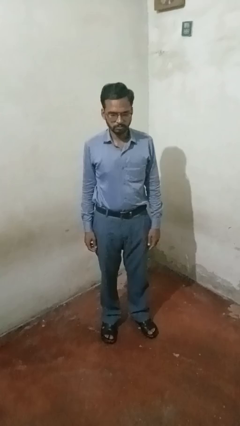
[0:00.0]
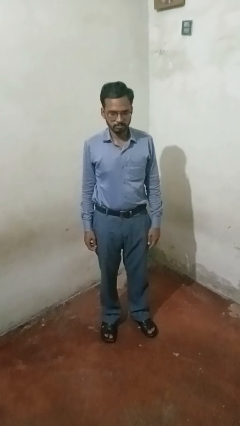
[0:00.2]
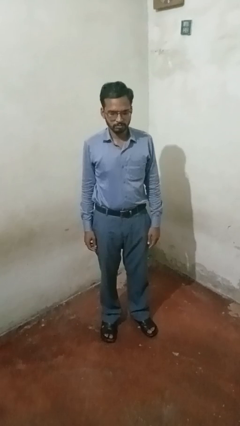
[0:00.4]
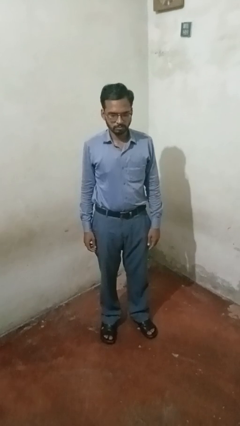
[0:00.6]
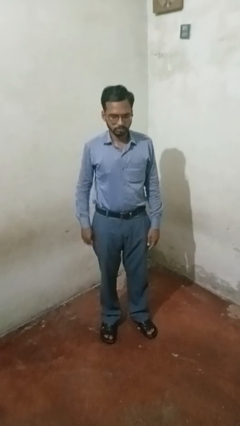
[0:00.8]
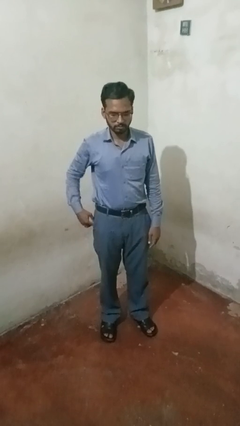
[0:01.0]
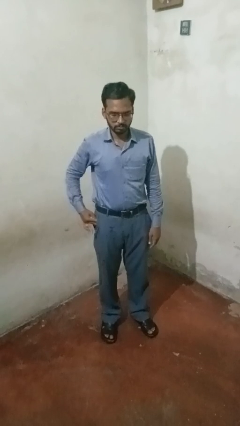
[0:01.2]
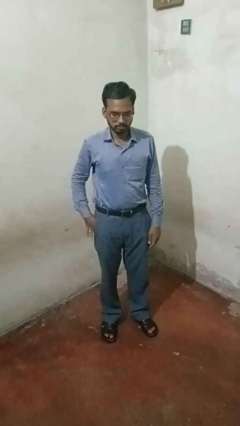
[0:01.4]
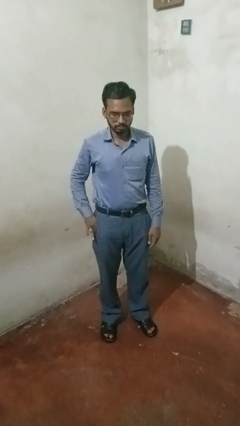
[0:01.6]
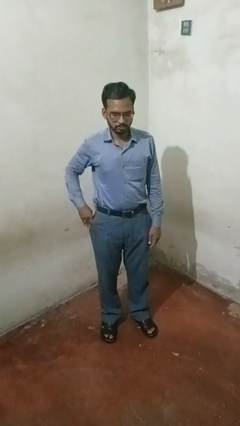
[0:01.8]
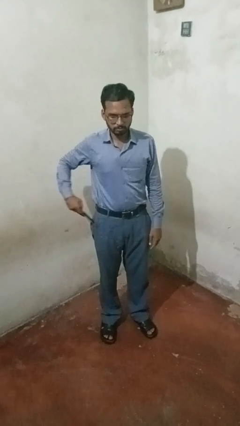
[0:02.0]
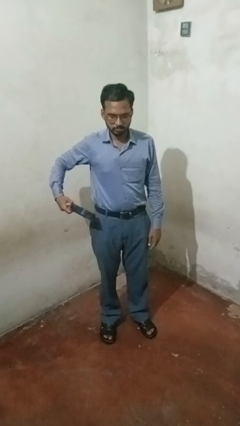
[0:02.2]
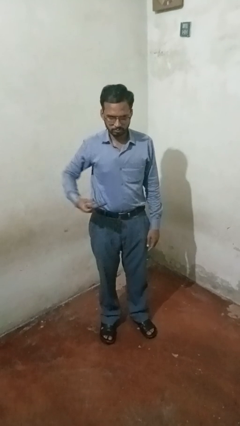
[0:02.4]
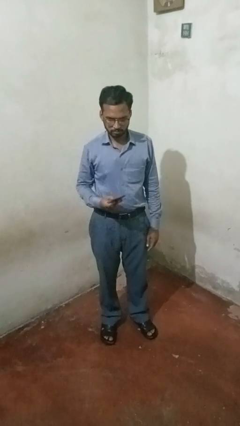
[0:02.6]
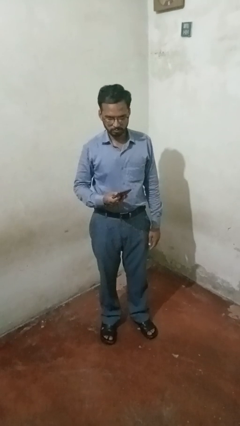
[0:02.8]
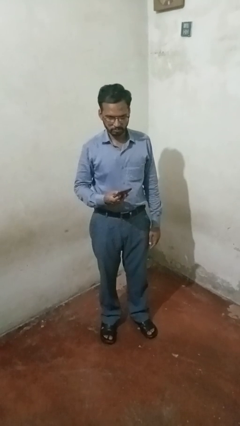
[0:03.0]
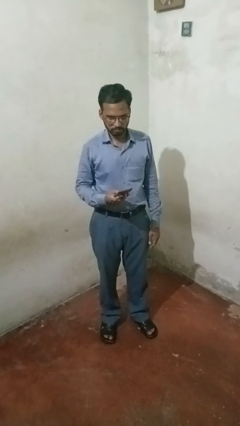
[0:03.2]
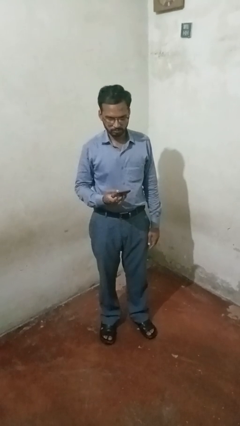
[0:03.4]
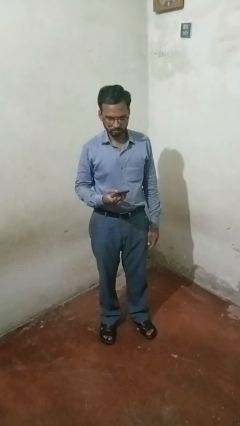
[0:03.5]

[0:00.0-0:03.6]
person takes phone from pocket

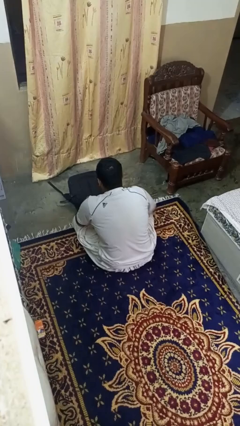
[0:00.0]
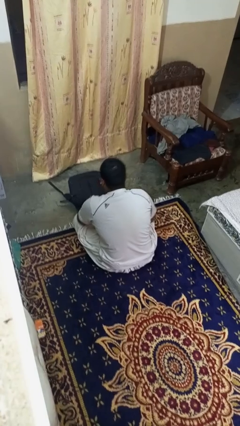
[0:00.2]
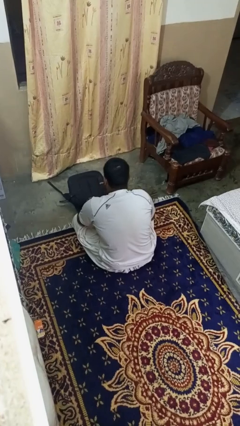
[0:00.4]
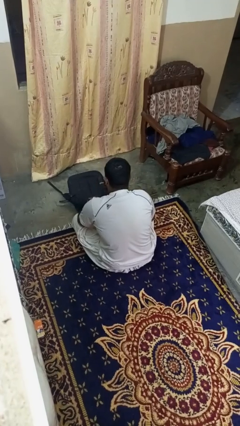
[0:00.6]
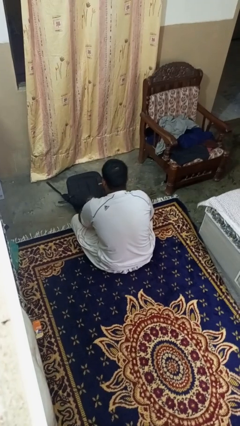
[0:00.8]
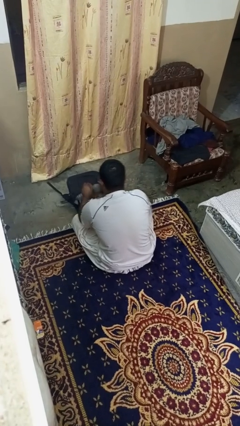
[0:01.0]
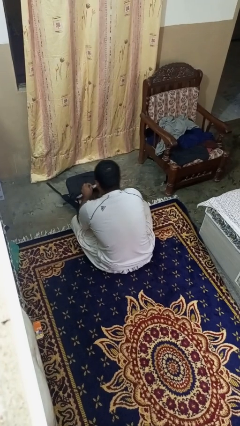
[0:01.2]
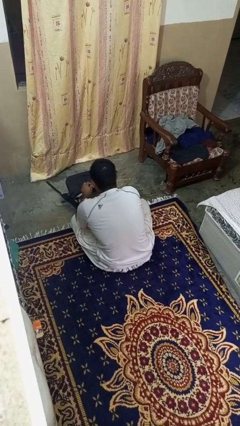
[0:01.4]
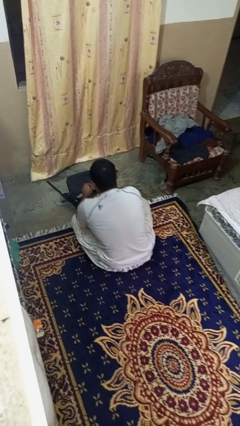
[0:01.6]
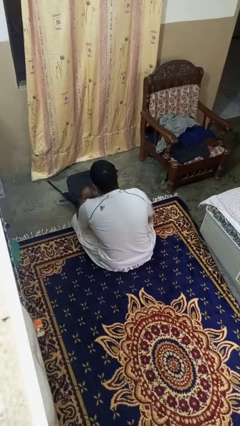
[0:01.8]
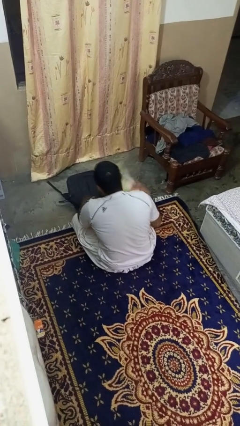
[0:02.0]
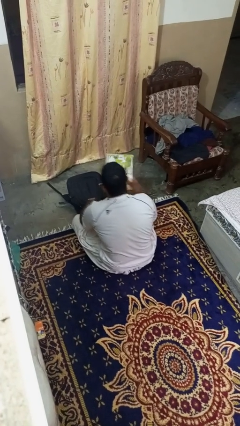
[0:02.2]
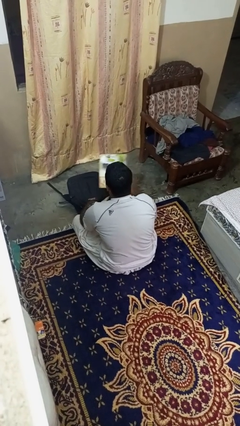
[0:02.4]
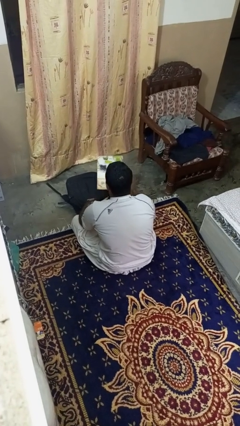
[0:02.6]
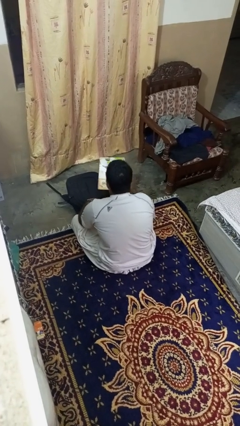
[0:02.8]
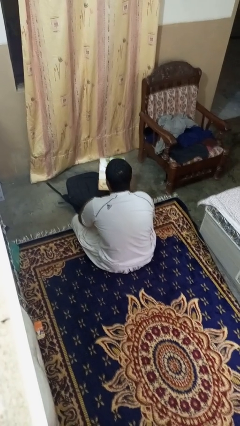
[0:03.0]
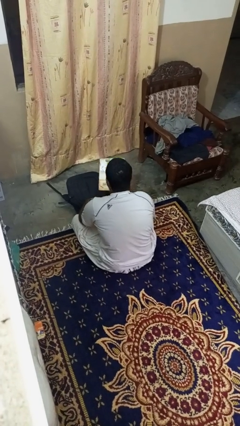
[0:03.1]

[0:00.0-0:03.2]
person takes object from bag

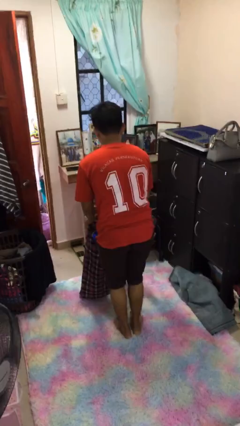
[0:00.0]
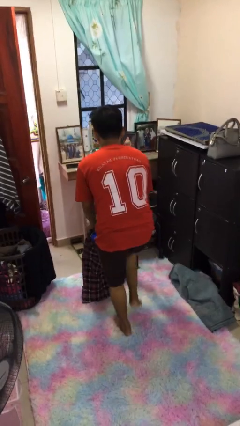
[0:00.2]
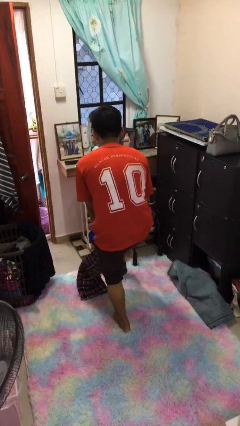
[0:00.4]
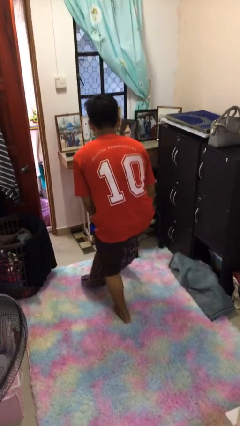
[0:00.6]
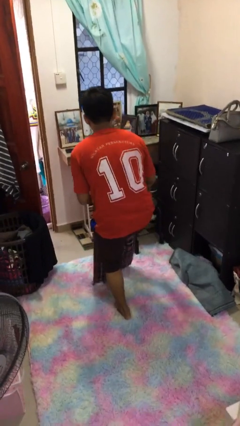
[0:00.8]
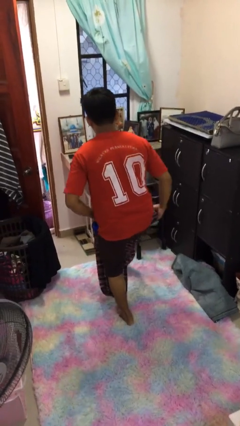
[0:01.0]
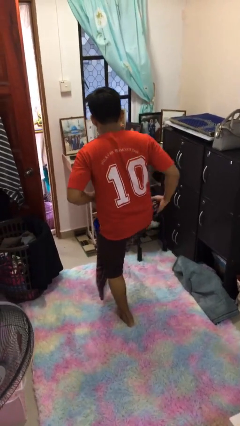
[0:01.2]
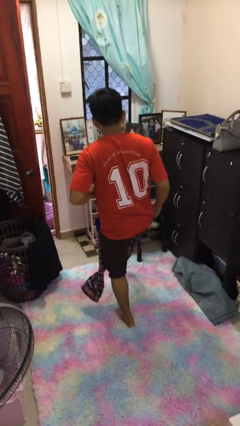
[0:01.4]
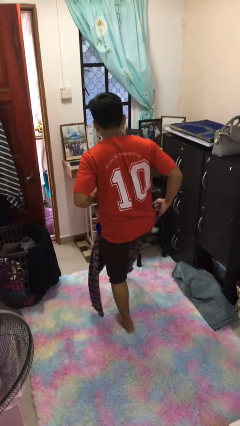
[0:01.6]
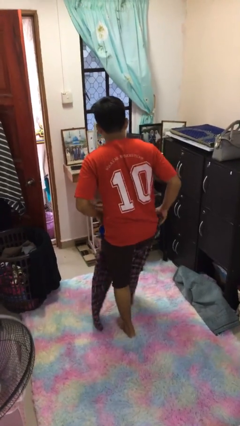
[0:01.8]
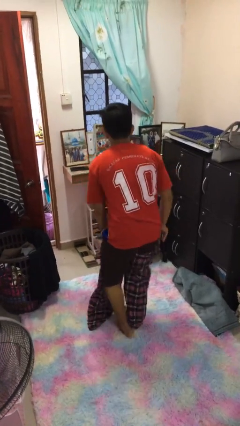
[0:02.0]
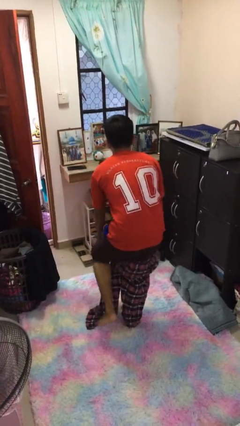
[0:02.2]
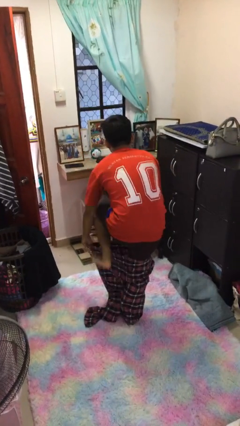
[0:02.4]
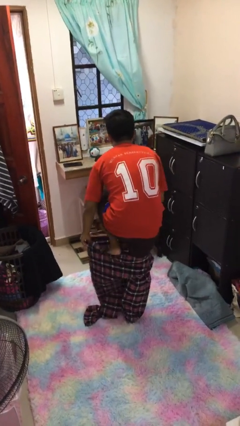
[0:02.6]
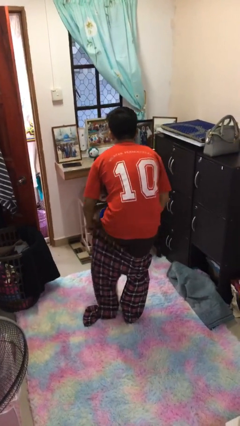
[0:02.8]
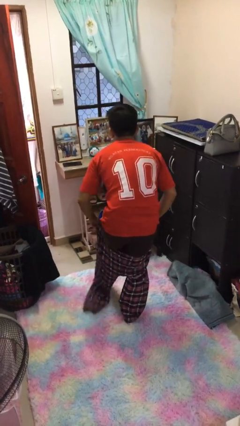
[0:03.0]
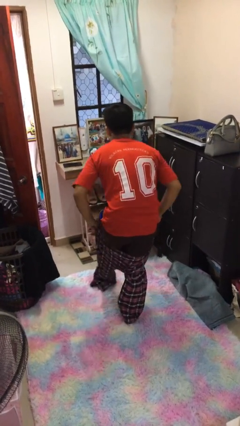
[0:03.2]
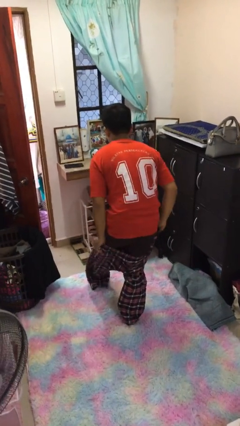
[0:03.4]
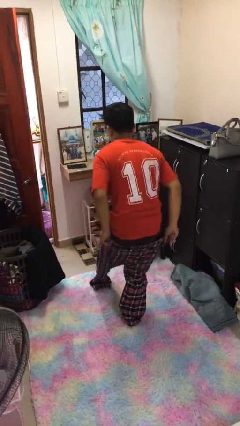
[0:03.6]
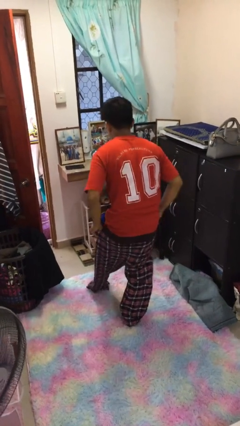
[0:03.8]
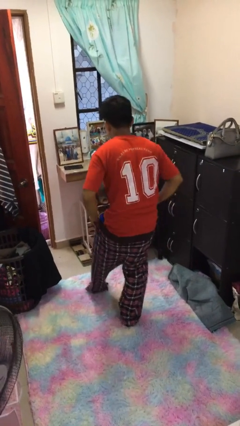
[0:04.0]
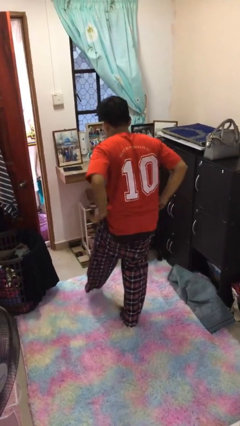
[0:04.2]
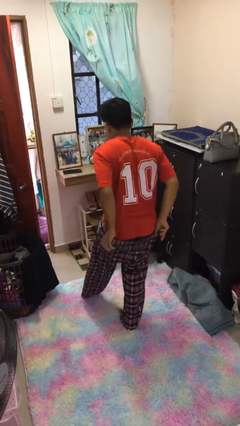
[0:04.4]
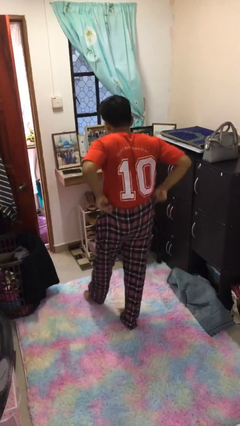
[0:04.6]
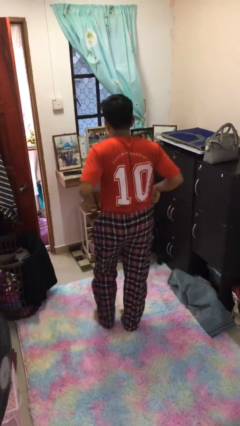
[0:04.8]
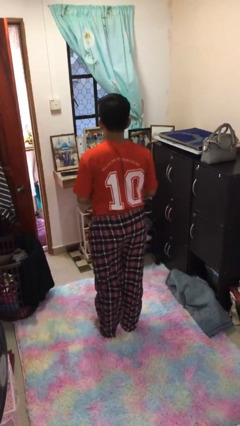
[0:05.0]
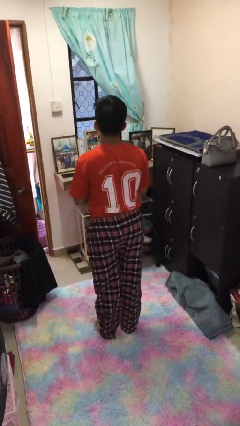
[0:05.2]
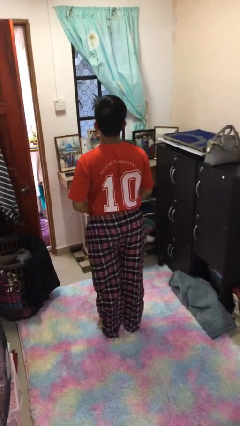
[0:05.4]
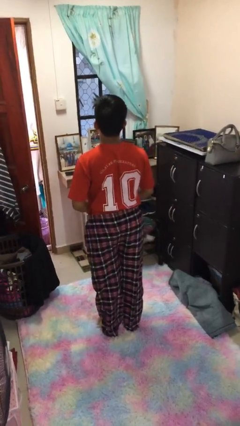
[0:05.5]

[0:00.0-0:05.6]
person puts on pants

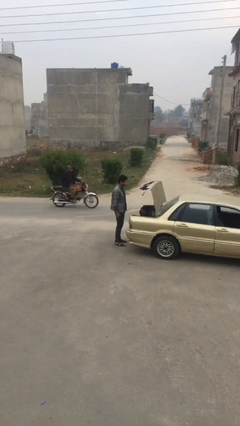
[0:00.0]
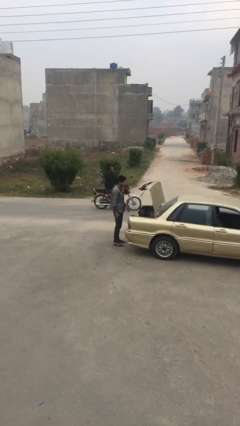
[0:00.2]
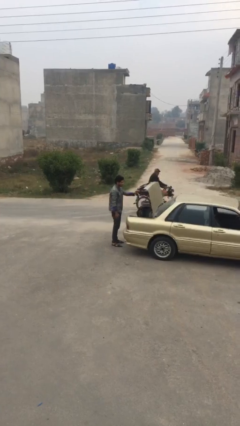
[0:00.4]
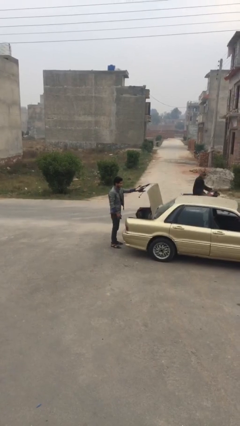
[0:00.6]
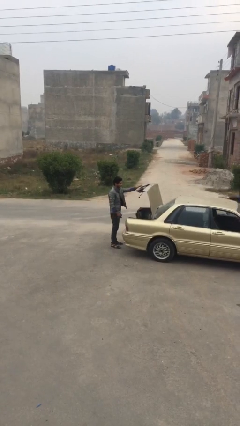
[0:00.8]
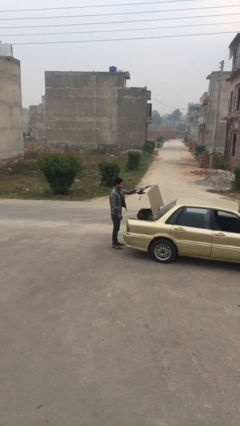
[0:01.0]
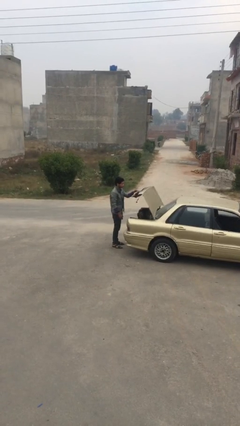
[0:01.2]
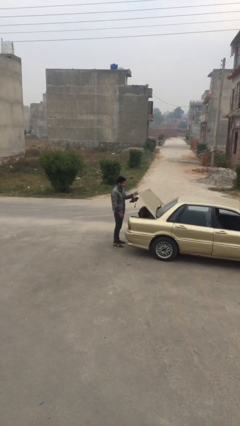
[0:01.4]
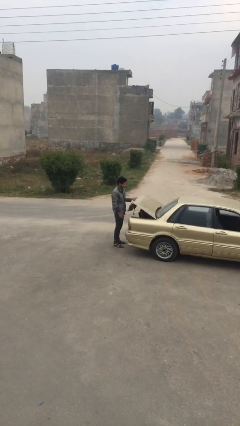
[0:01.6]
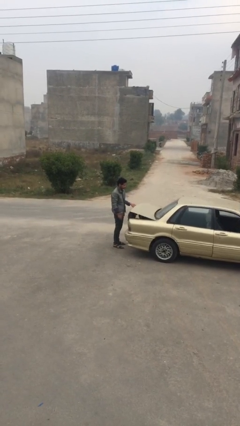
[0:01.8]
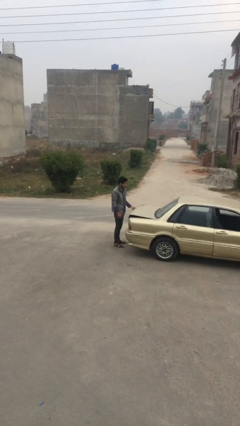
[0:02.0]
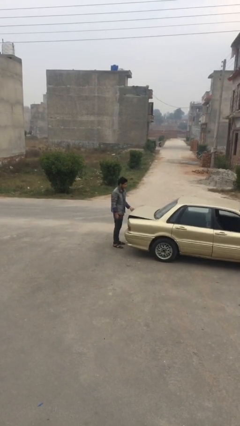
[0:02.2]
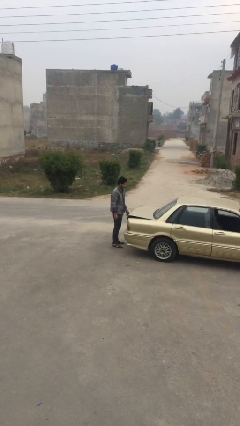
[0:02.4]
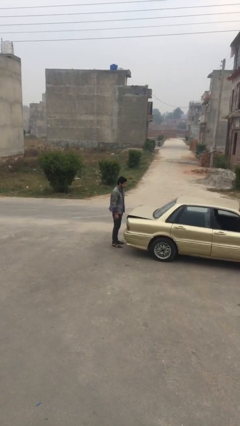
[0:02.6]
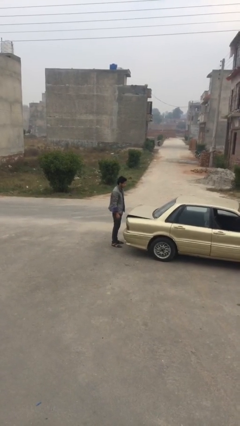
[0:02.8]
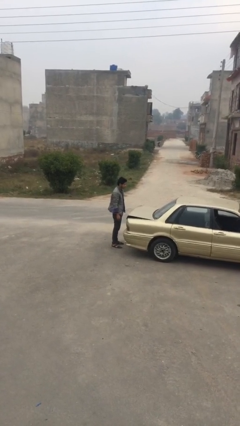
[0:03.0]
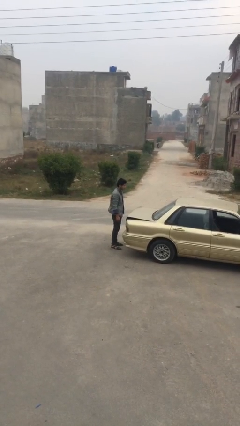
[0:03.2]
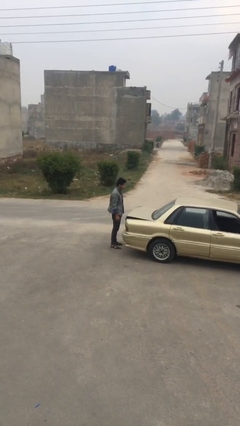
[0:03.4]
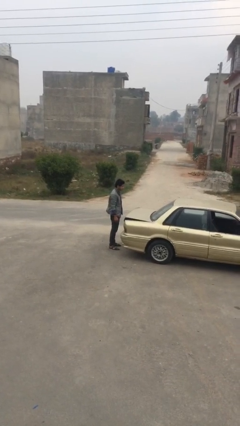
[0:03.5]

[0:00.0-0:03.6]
person closes car trunk

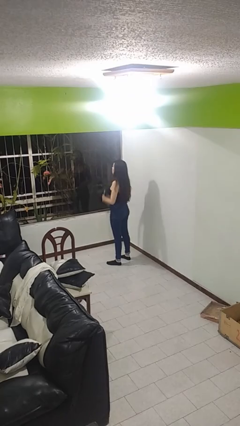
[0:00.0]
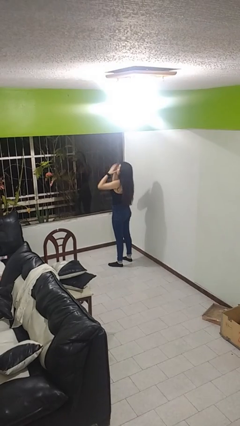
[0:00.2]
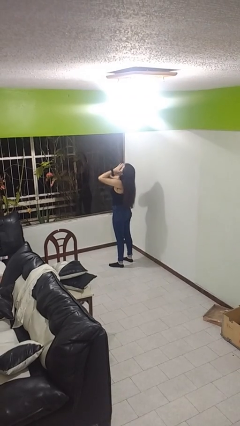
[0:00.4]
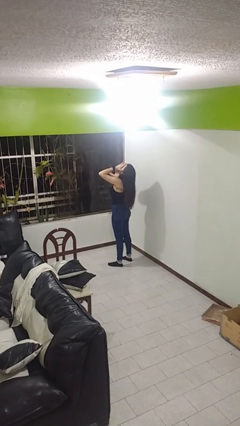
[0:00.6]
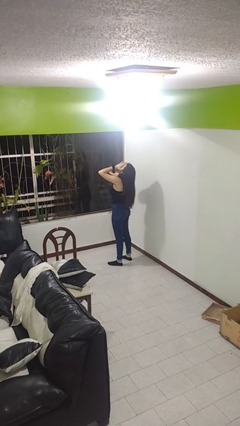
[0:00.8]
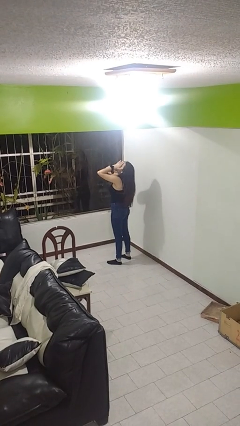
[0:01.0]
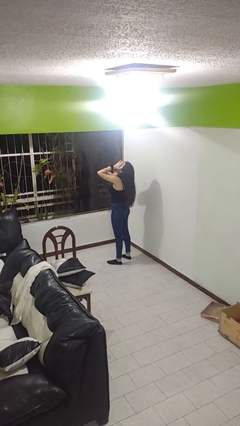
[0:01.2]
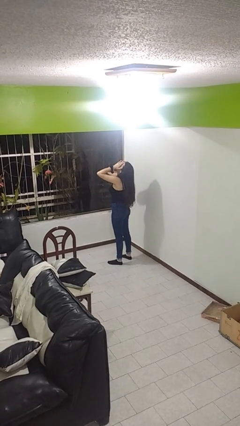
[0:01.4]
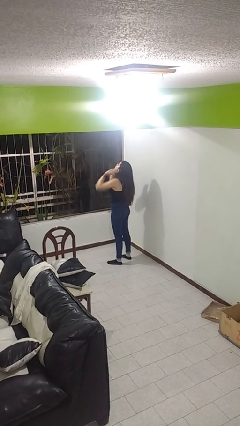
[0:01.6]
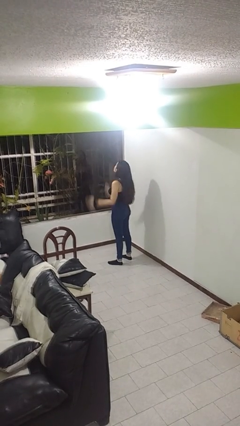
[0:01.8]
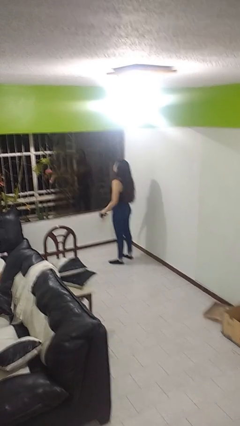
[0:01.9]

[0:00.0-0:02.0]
person covers face with hands

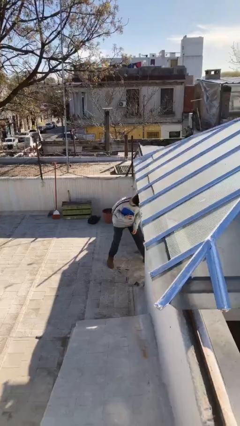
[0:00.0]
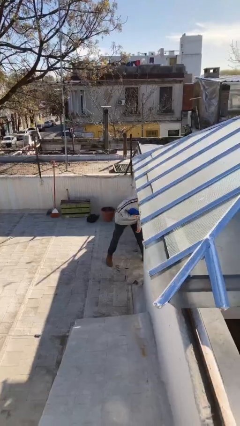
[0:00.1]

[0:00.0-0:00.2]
person steals object from person
